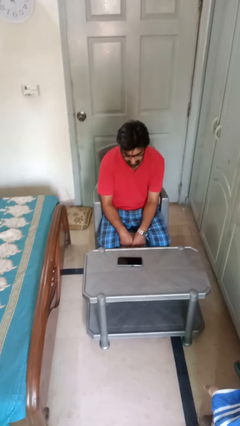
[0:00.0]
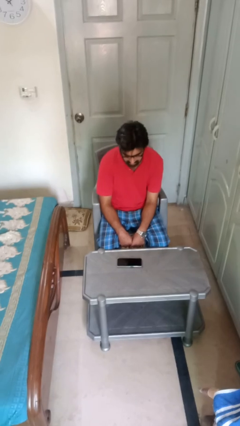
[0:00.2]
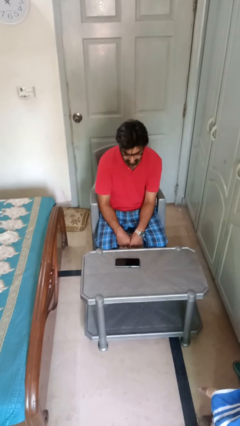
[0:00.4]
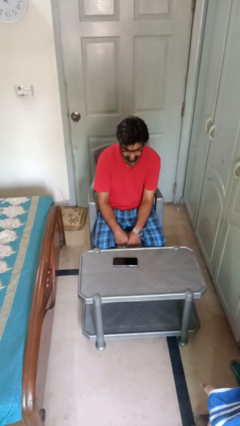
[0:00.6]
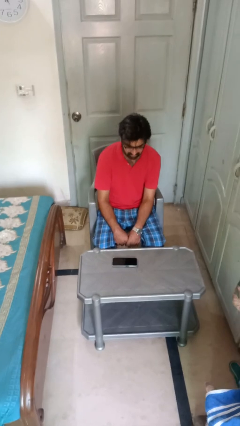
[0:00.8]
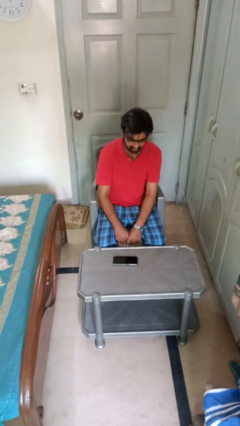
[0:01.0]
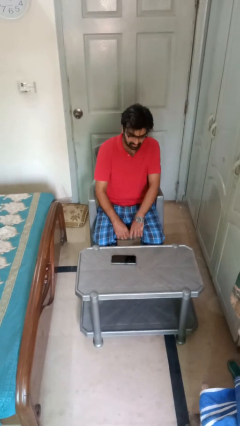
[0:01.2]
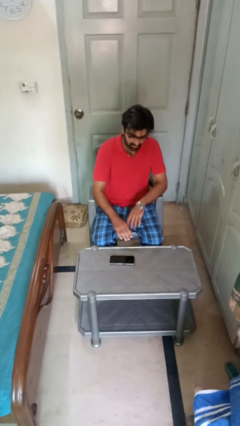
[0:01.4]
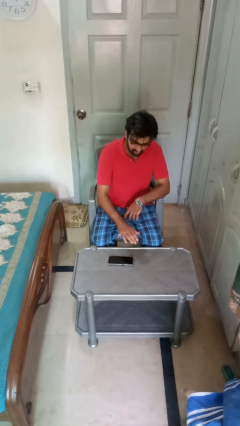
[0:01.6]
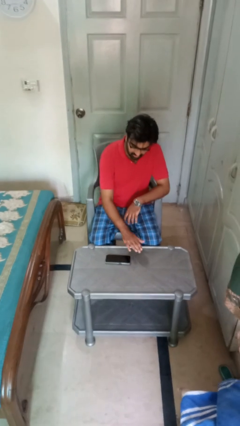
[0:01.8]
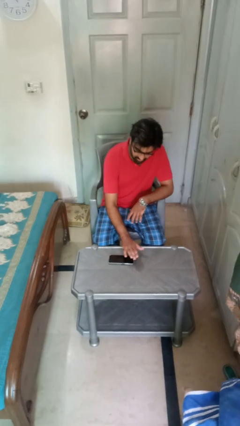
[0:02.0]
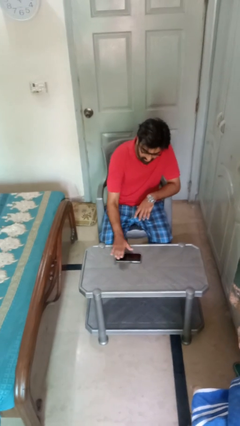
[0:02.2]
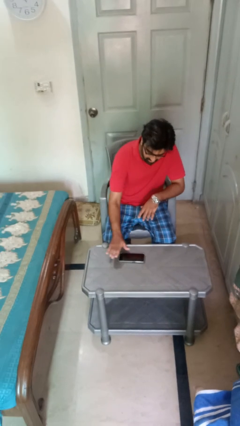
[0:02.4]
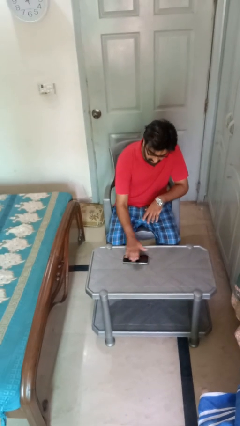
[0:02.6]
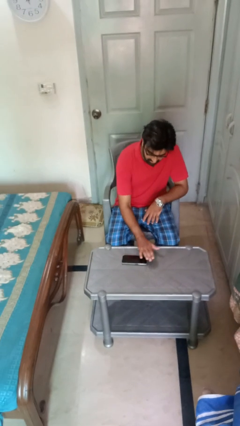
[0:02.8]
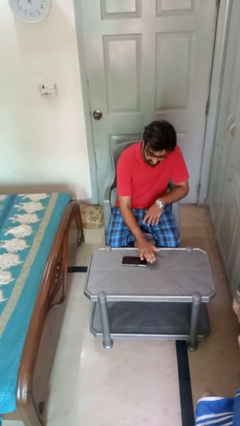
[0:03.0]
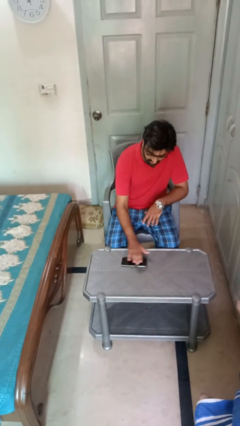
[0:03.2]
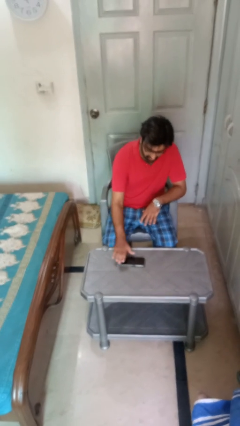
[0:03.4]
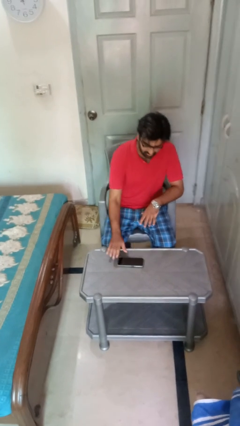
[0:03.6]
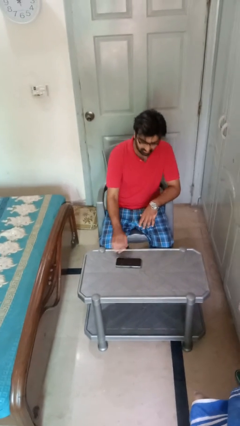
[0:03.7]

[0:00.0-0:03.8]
person waves hand over object

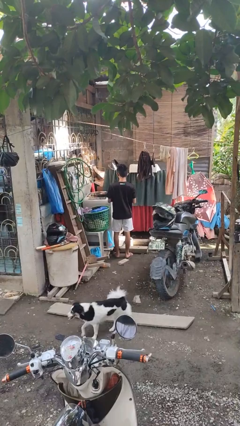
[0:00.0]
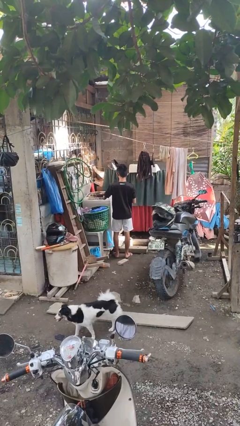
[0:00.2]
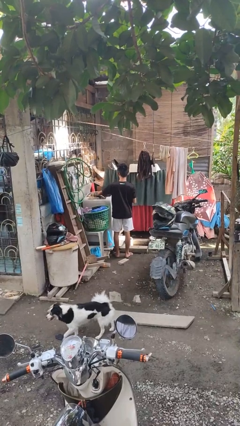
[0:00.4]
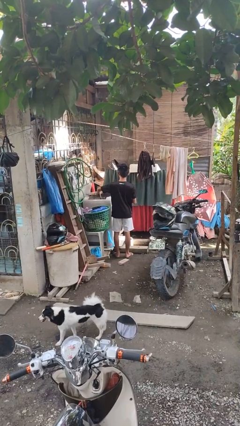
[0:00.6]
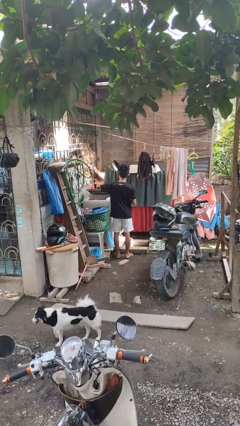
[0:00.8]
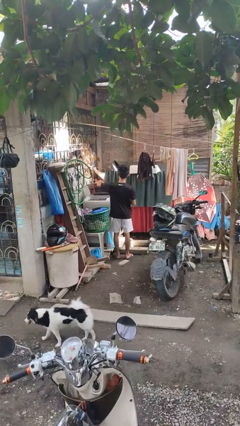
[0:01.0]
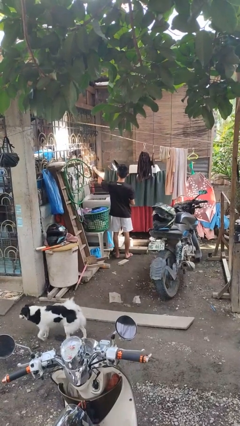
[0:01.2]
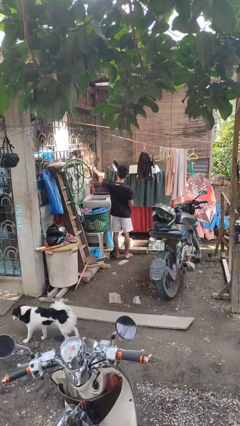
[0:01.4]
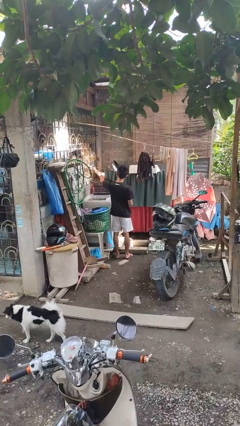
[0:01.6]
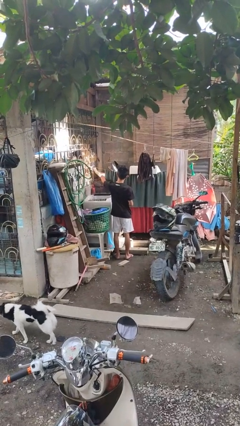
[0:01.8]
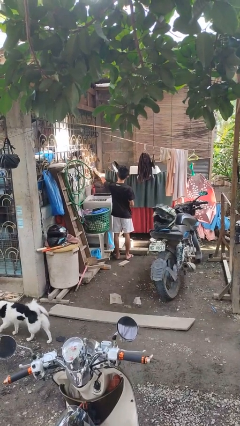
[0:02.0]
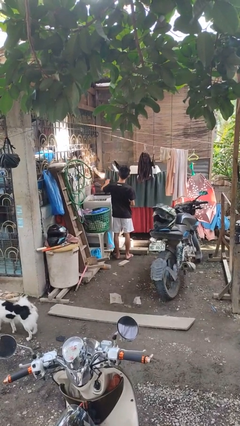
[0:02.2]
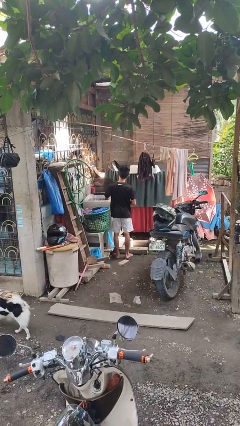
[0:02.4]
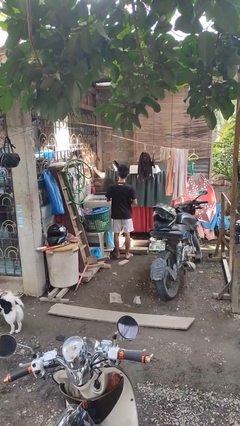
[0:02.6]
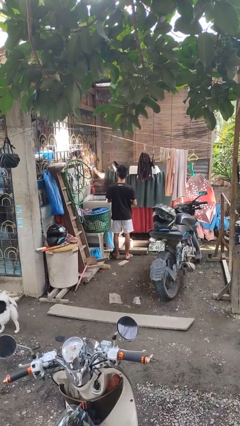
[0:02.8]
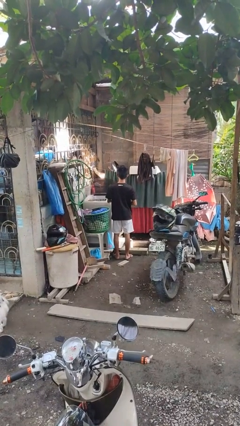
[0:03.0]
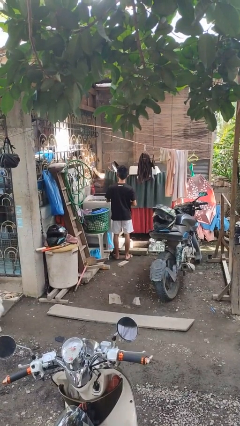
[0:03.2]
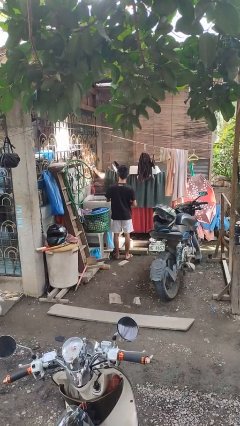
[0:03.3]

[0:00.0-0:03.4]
person opens clothes washer

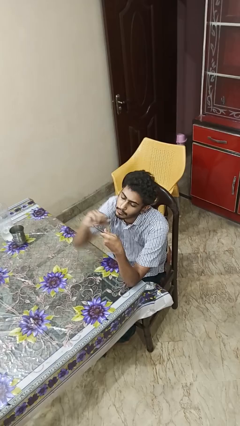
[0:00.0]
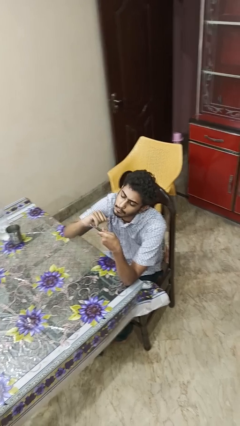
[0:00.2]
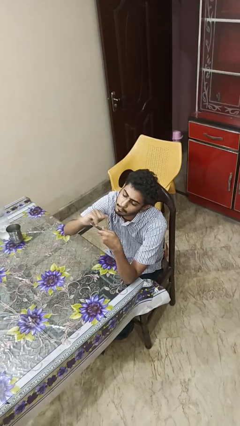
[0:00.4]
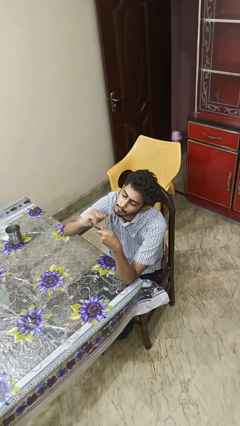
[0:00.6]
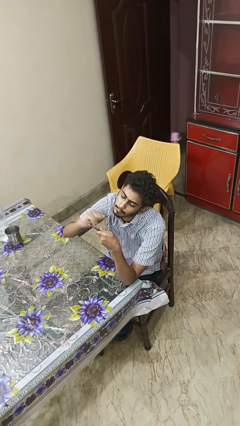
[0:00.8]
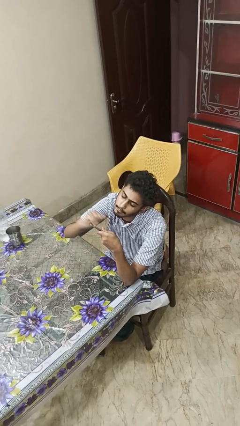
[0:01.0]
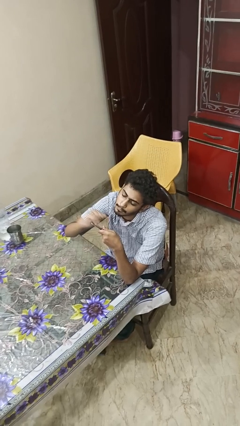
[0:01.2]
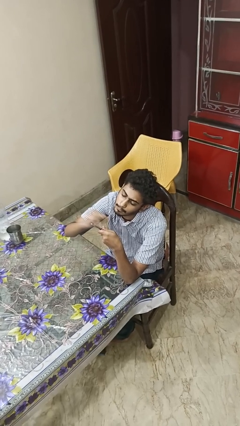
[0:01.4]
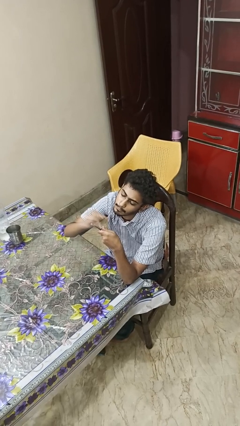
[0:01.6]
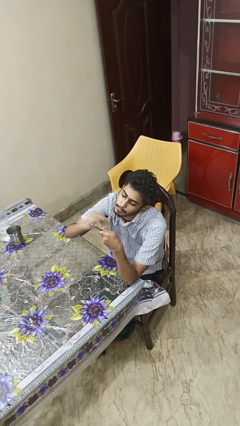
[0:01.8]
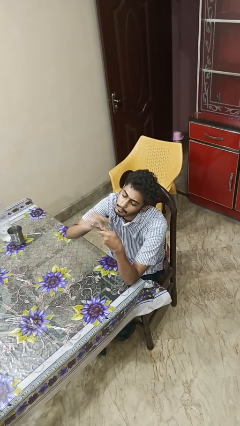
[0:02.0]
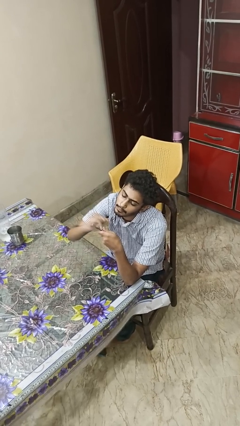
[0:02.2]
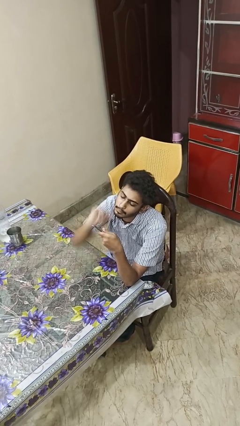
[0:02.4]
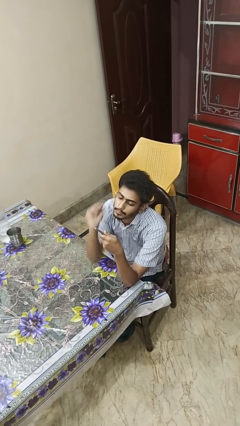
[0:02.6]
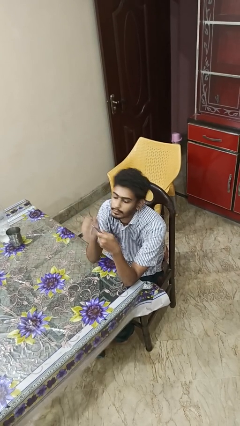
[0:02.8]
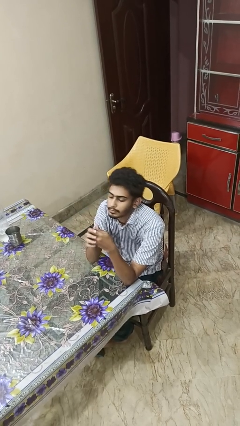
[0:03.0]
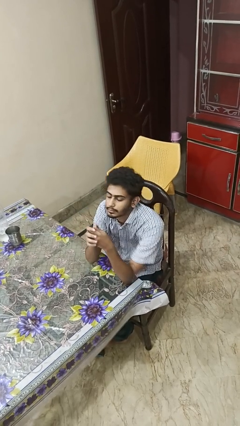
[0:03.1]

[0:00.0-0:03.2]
person files fingernails

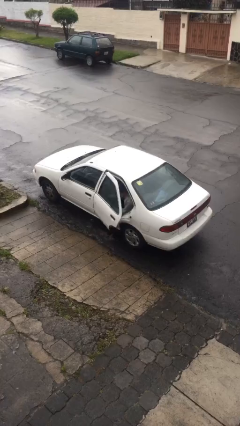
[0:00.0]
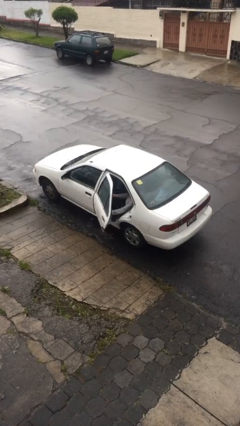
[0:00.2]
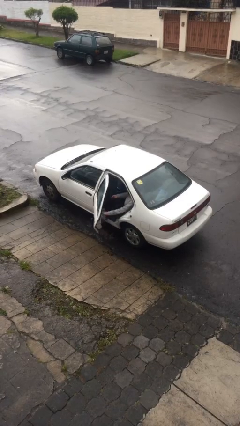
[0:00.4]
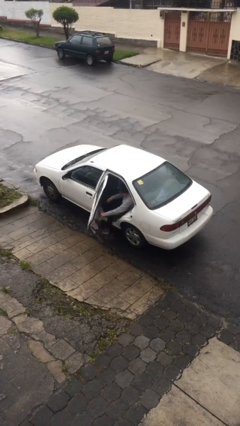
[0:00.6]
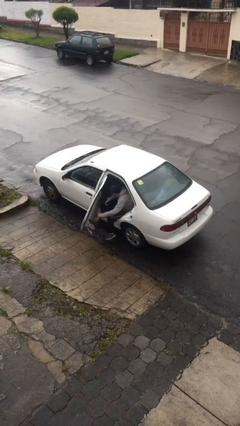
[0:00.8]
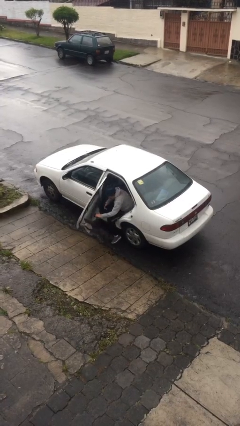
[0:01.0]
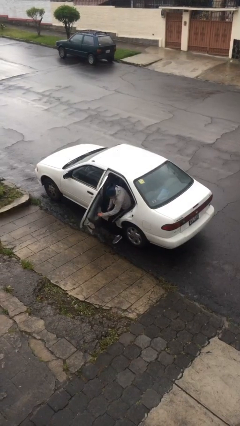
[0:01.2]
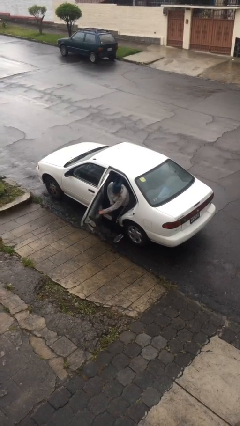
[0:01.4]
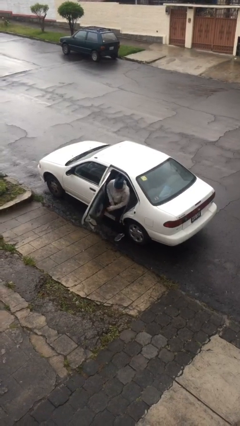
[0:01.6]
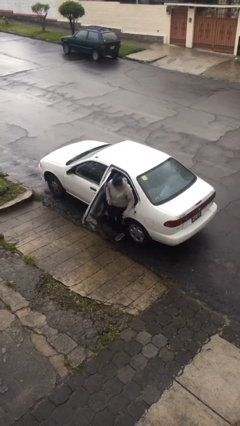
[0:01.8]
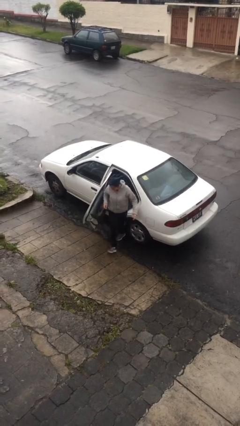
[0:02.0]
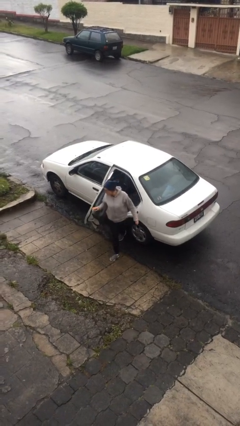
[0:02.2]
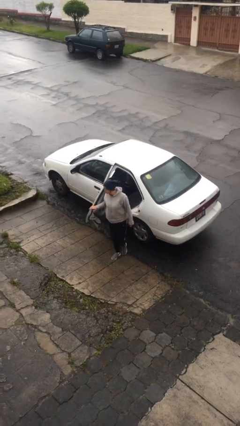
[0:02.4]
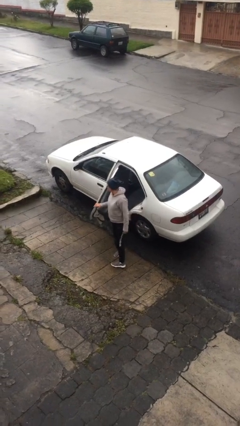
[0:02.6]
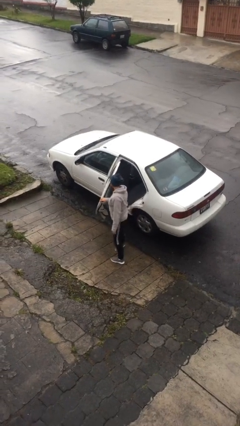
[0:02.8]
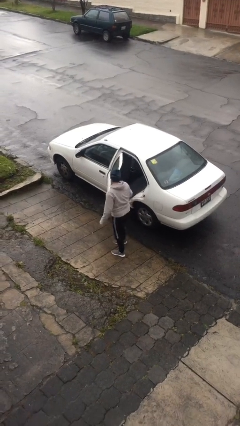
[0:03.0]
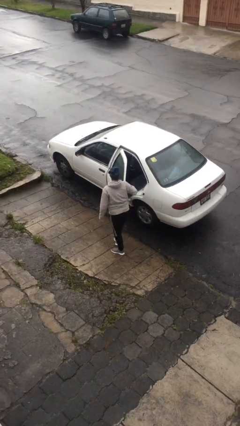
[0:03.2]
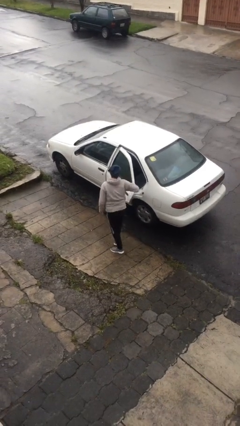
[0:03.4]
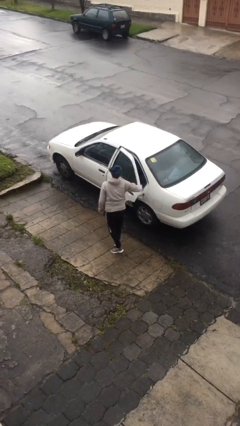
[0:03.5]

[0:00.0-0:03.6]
car drops off person

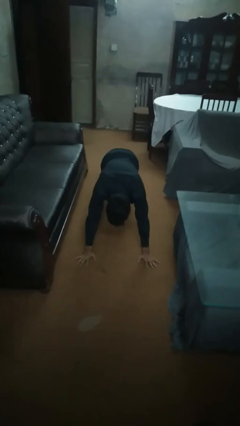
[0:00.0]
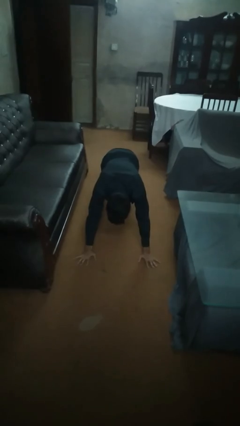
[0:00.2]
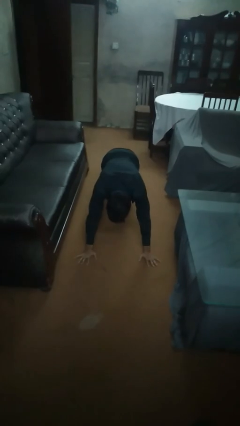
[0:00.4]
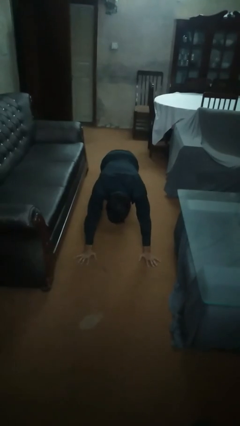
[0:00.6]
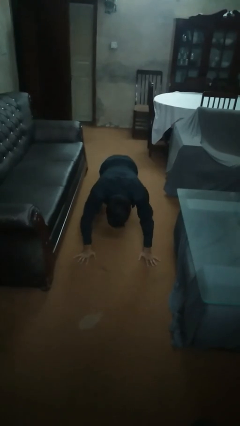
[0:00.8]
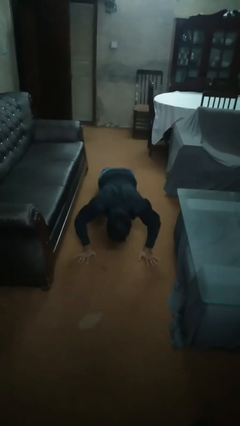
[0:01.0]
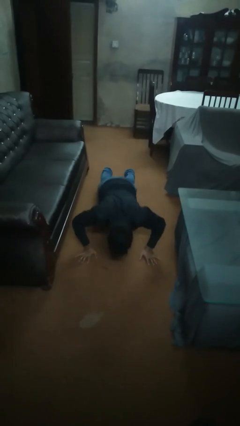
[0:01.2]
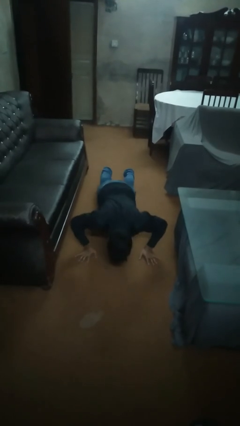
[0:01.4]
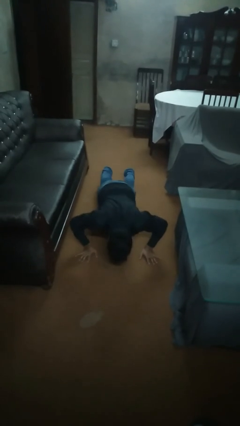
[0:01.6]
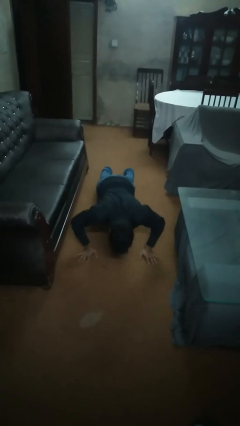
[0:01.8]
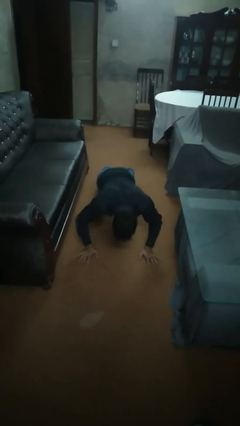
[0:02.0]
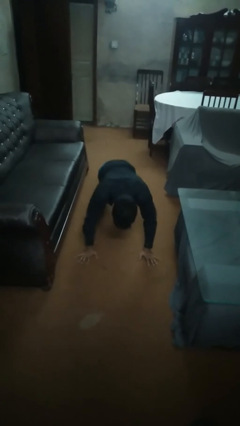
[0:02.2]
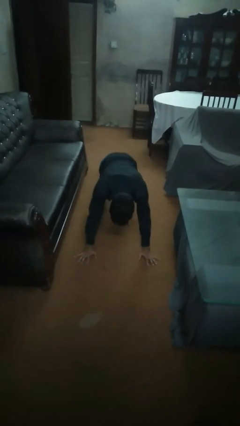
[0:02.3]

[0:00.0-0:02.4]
person exercises with pushup

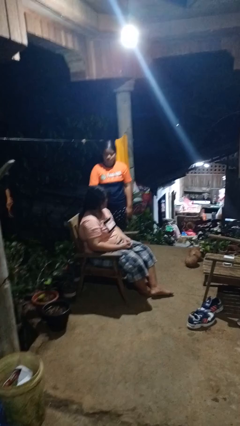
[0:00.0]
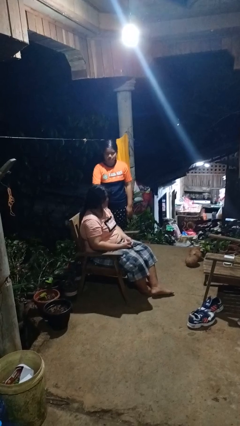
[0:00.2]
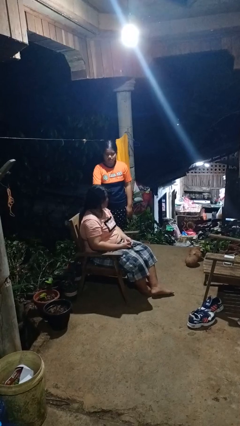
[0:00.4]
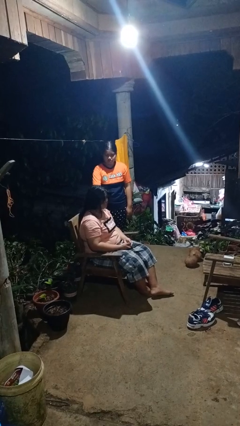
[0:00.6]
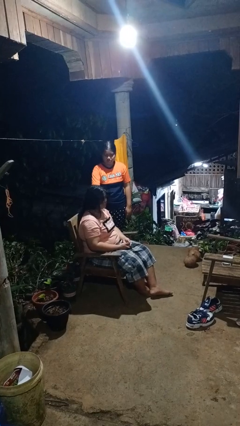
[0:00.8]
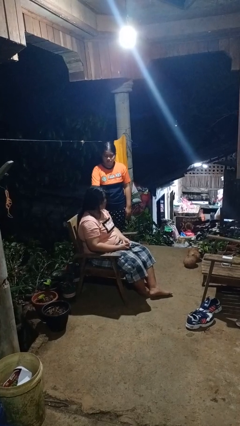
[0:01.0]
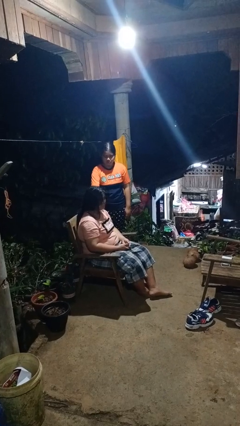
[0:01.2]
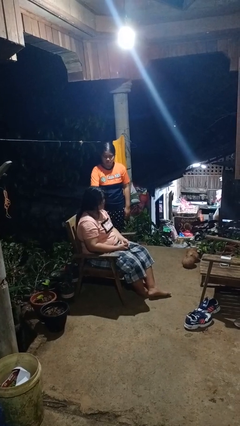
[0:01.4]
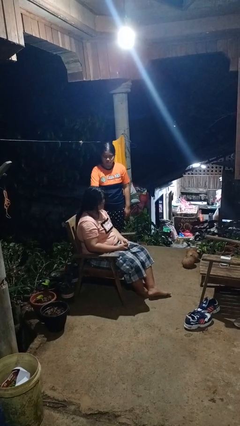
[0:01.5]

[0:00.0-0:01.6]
person grabs person by shoulder
